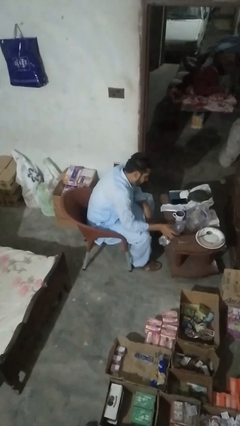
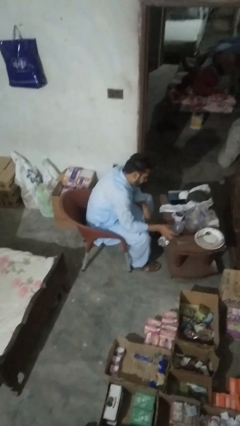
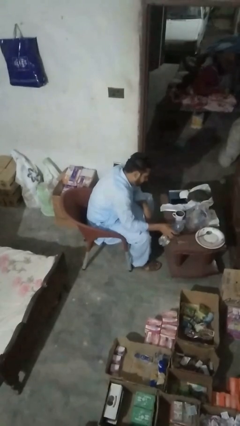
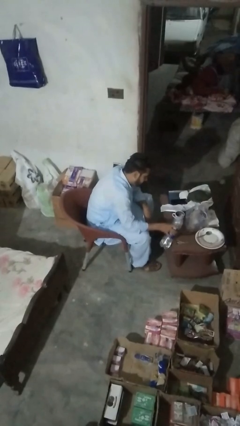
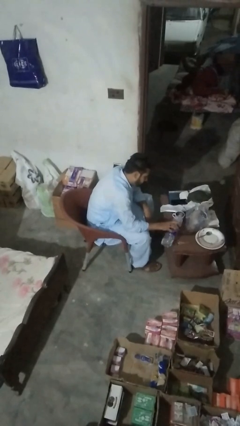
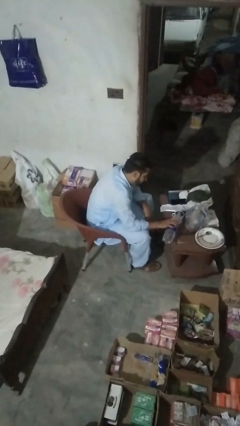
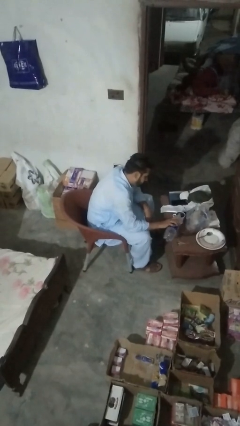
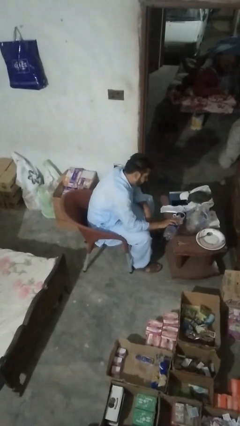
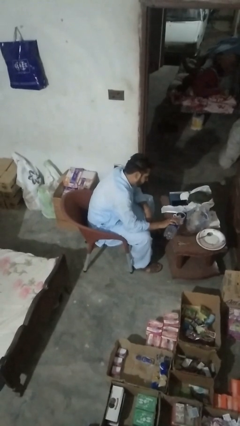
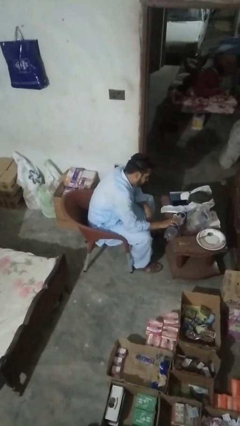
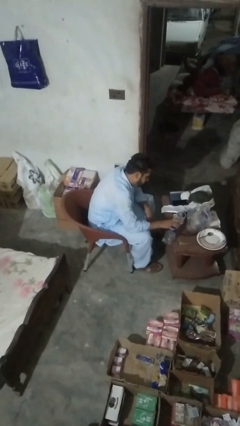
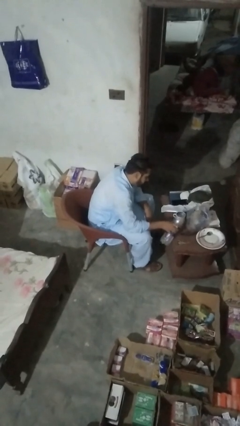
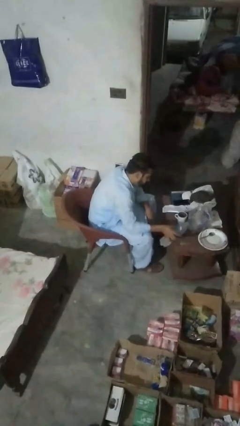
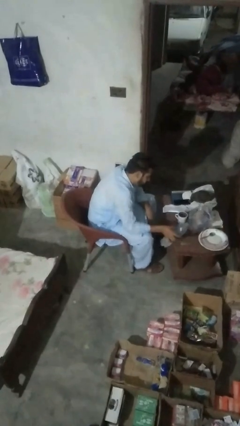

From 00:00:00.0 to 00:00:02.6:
person pours liquid into cup

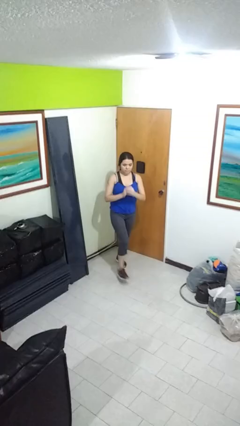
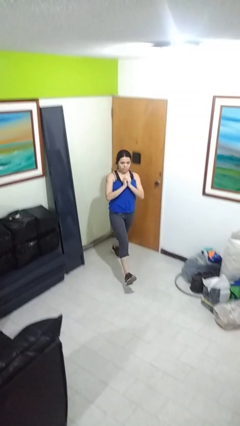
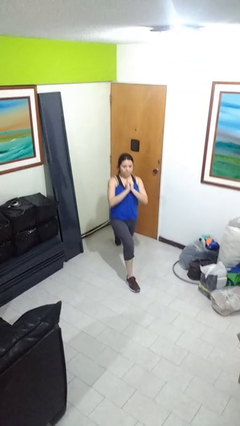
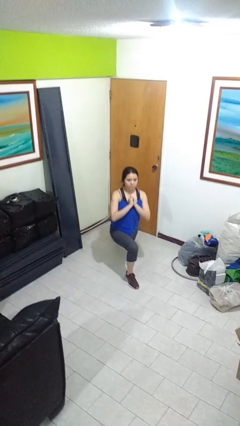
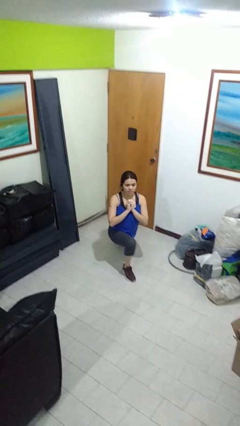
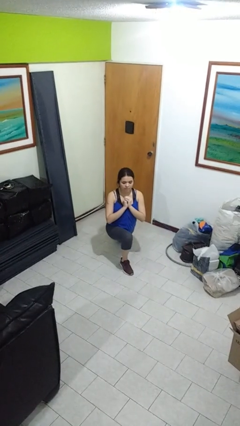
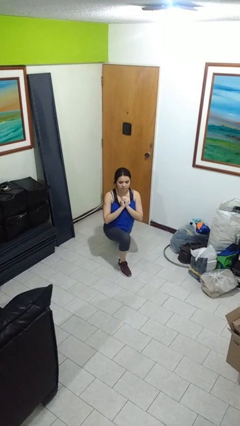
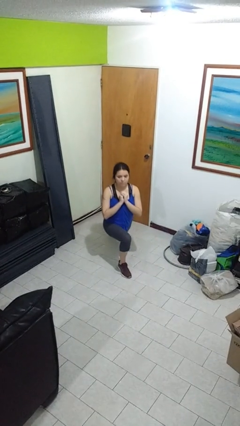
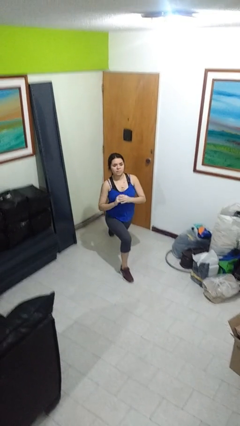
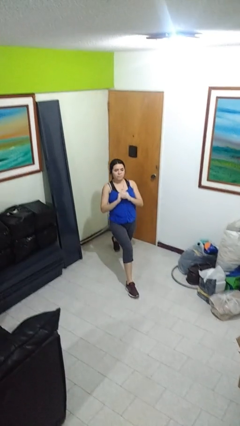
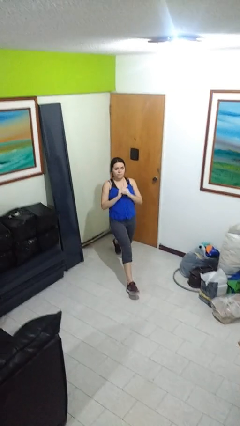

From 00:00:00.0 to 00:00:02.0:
person exercises with lunges

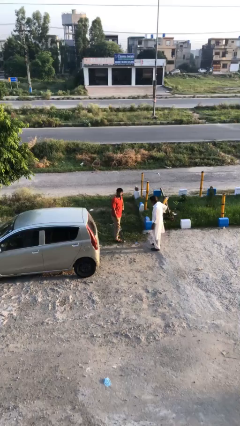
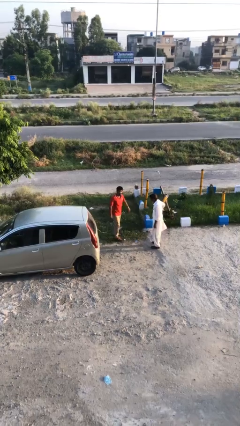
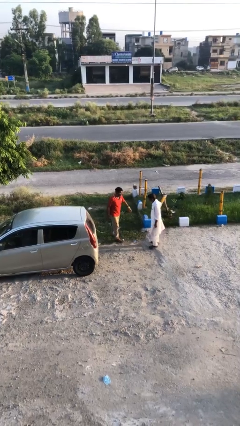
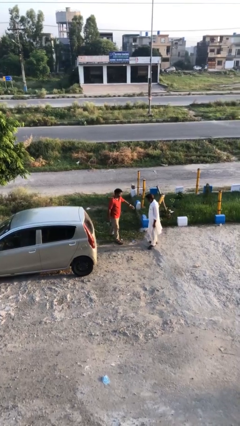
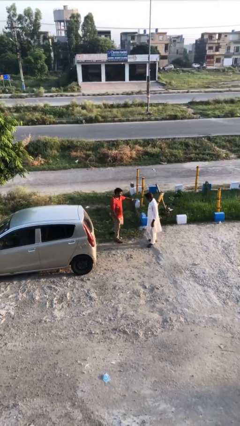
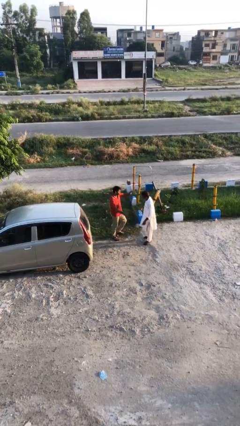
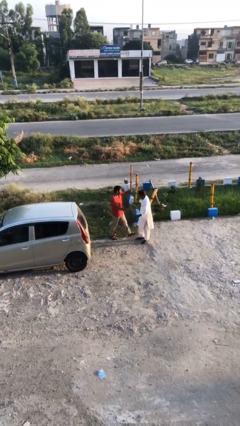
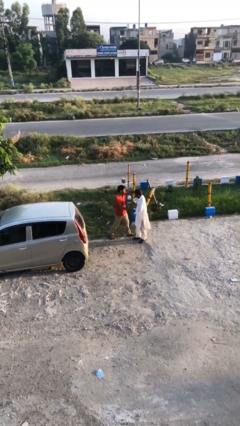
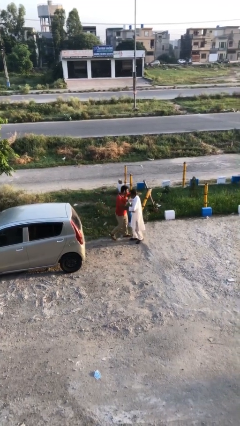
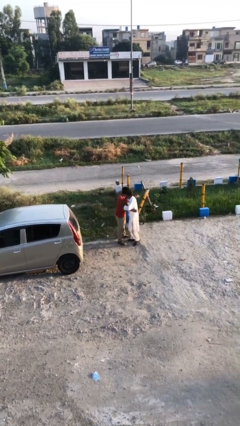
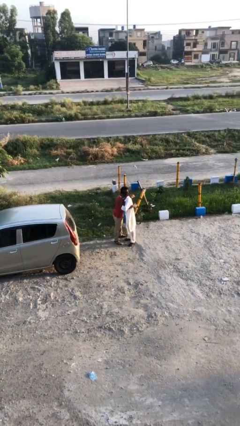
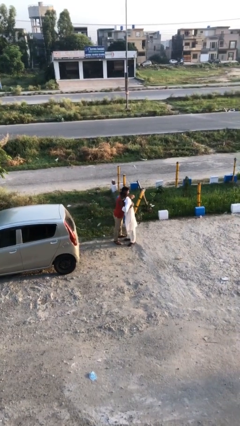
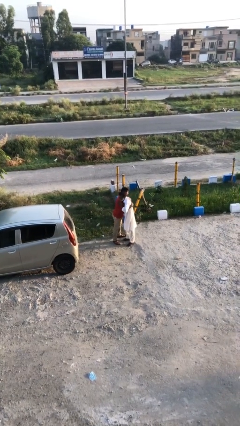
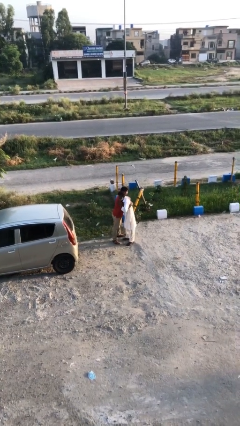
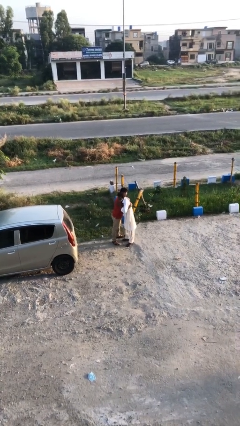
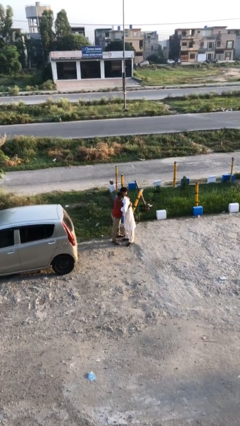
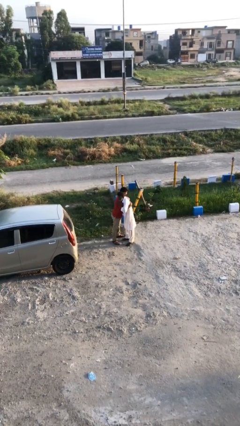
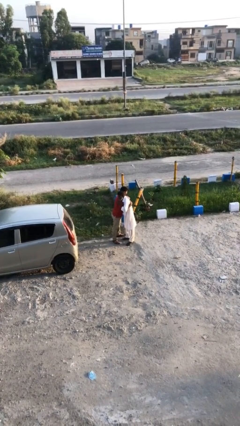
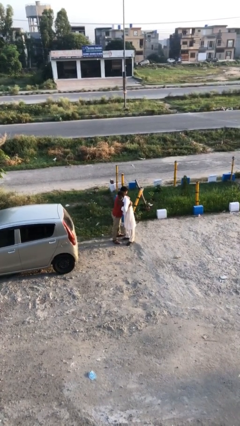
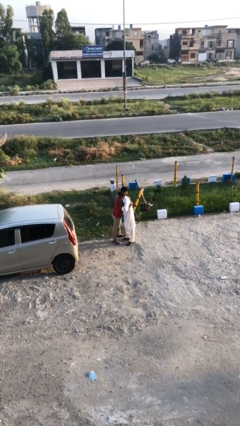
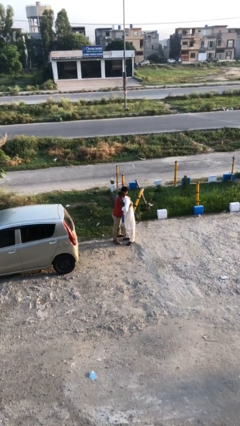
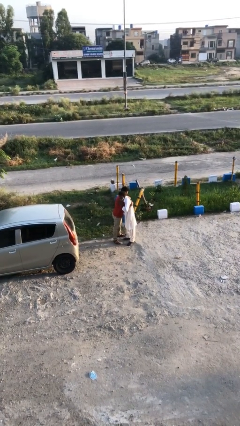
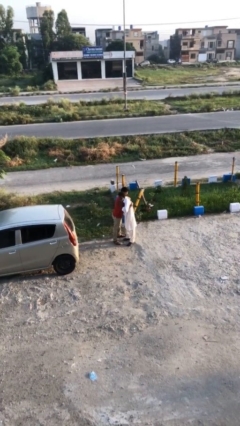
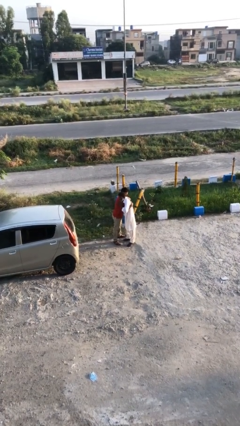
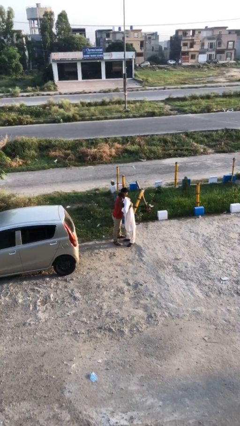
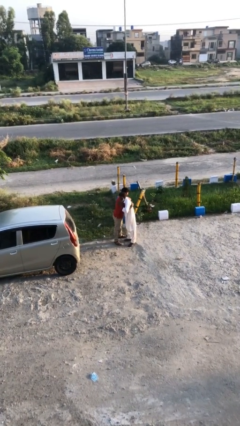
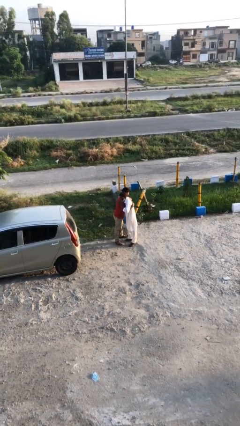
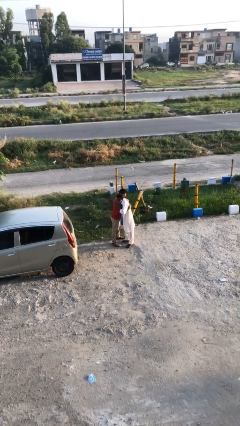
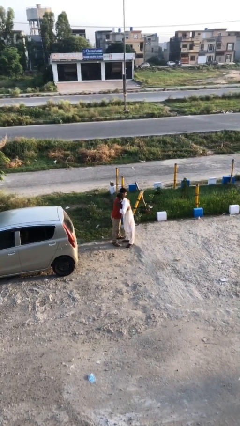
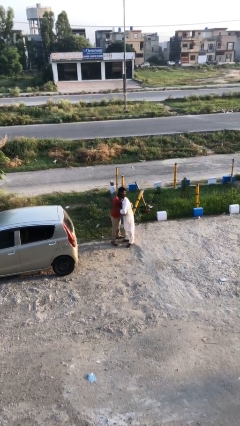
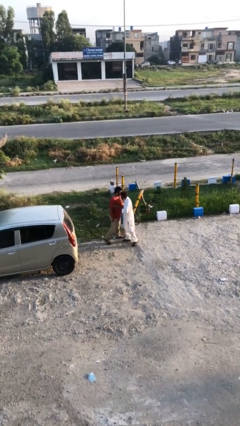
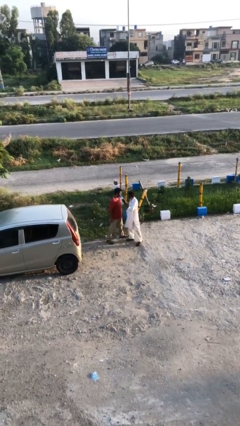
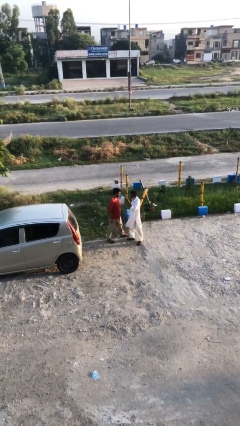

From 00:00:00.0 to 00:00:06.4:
person embraces person

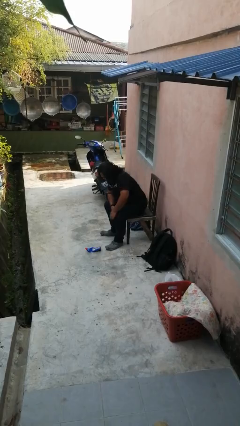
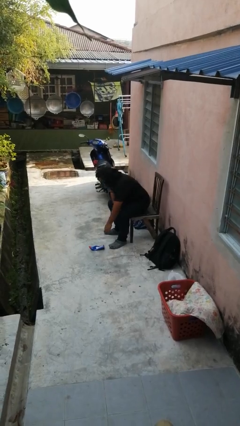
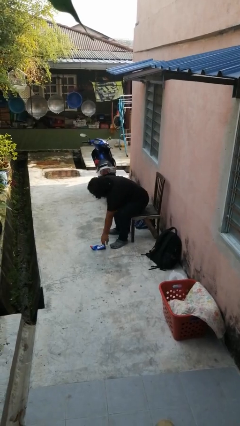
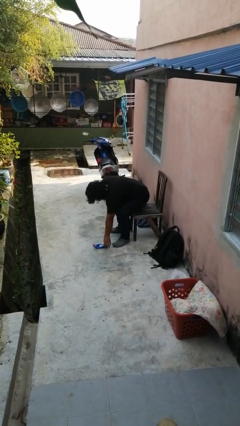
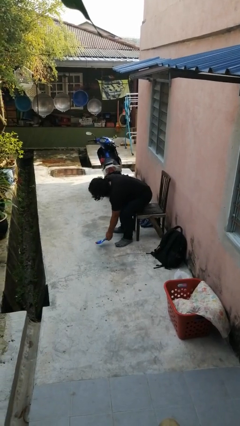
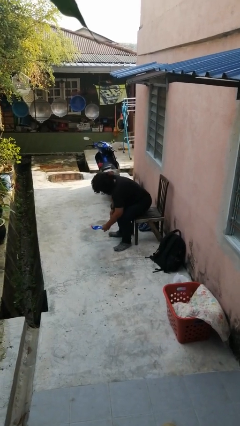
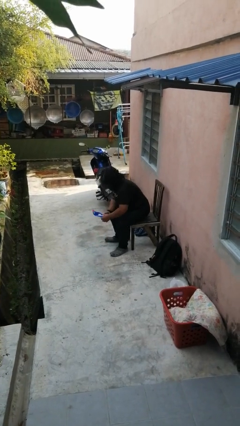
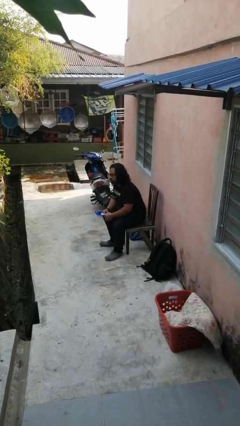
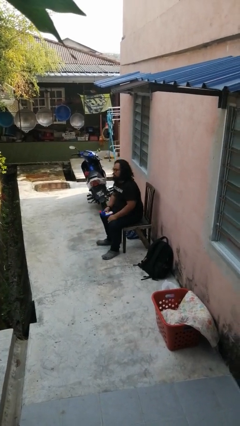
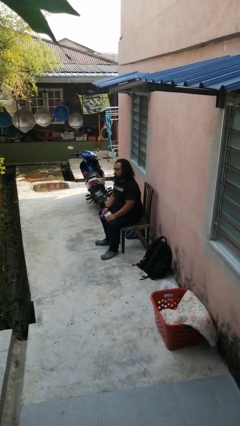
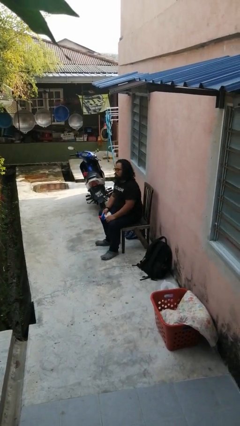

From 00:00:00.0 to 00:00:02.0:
person picks up object from floor

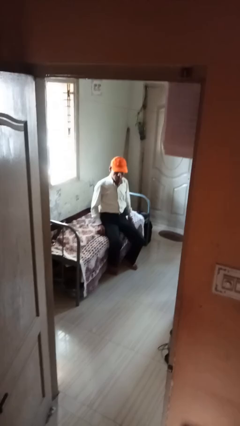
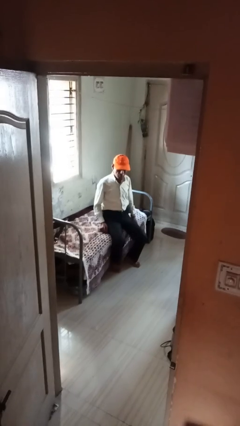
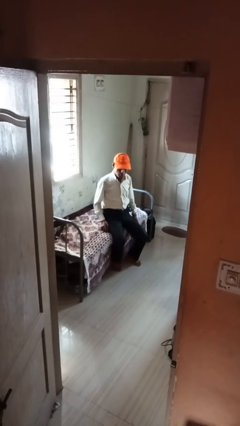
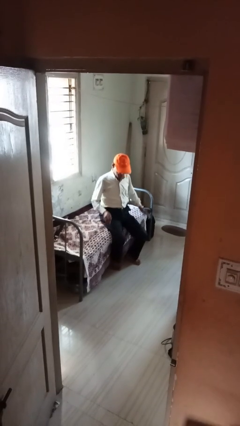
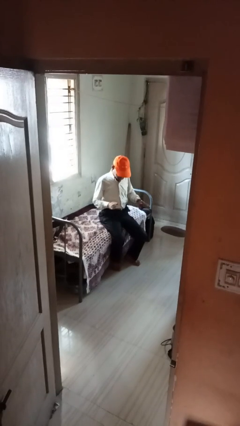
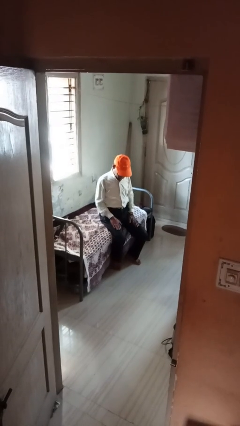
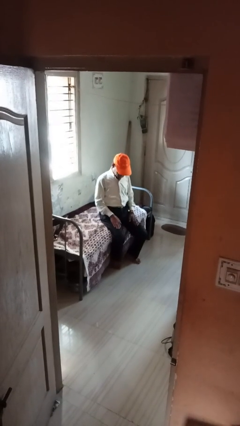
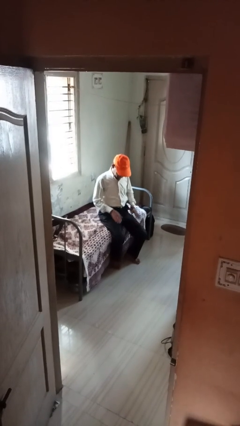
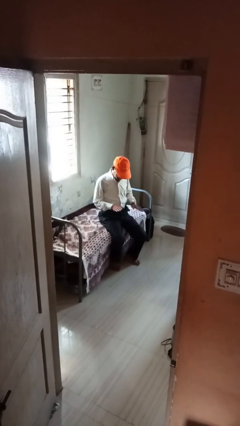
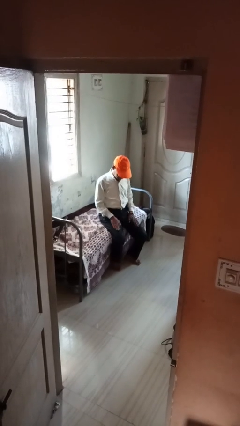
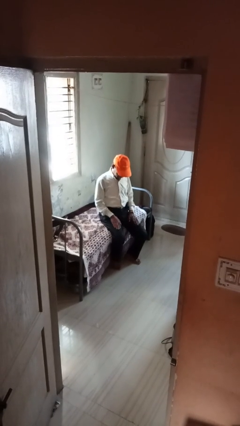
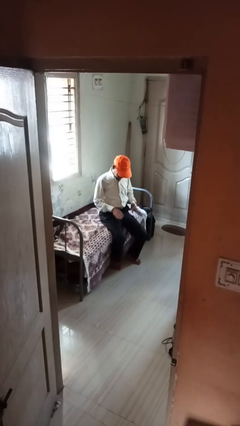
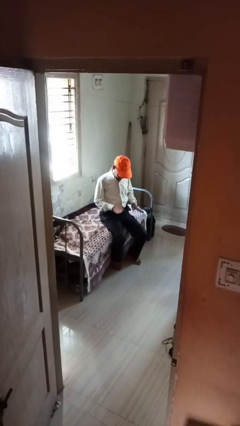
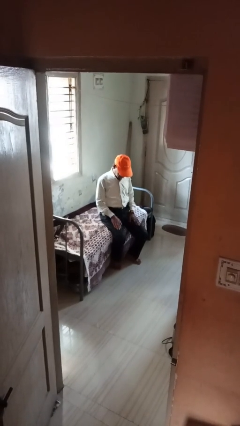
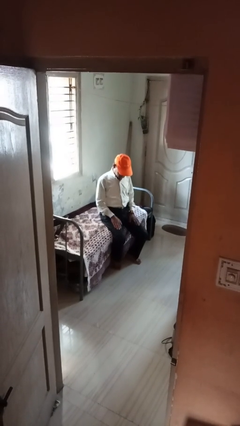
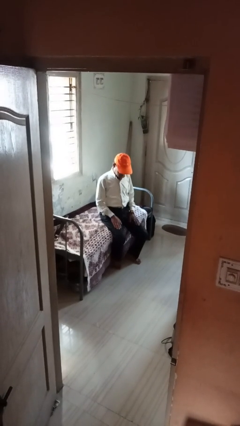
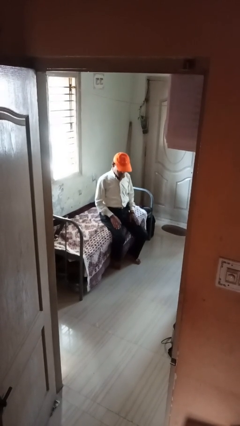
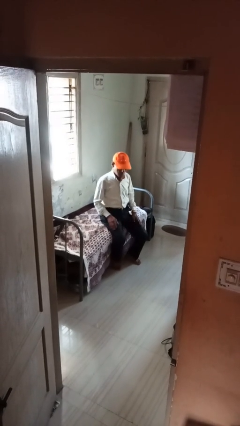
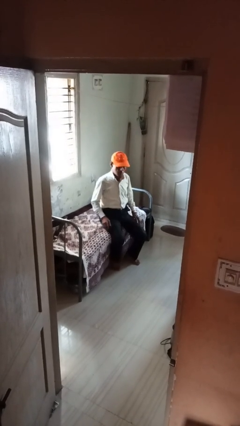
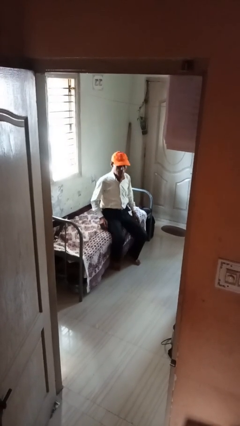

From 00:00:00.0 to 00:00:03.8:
person slaps hands on thighs

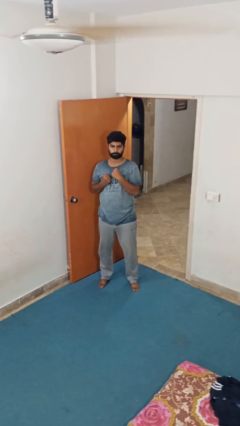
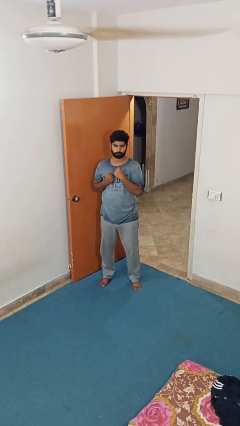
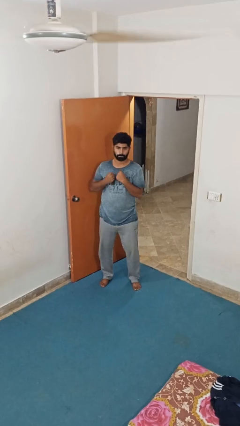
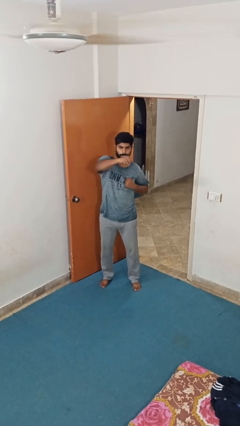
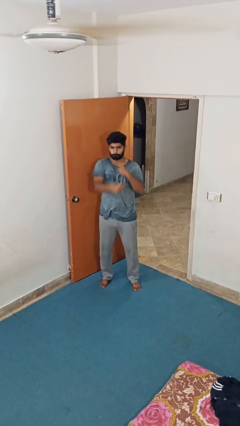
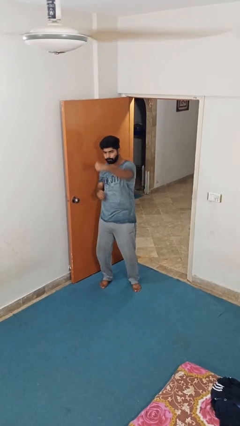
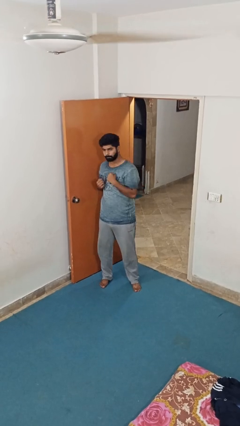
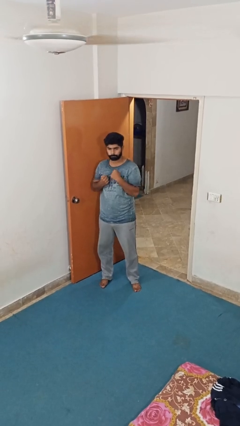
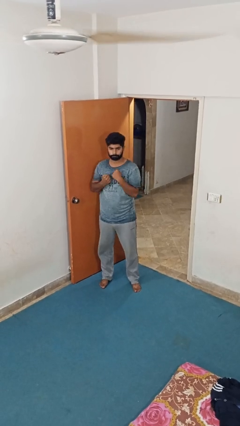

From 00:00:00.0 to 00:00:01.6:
person punches
